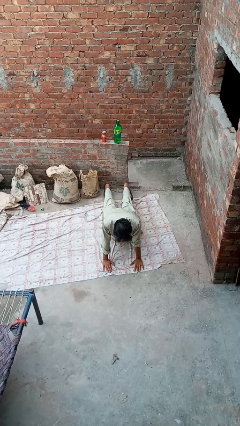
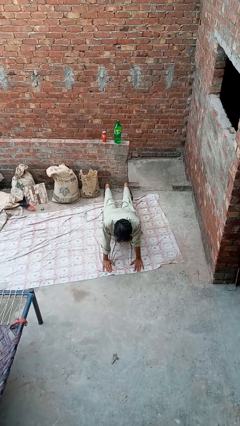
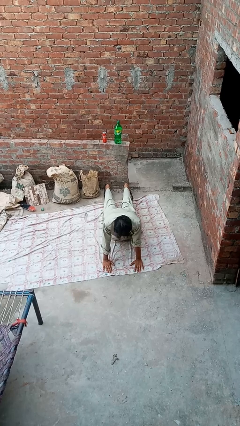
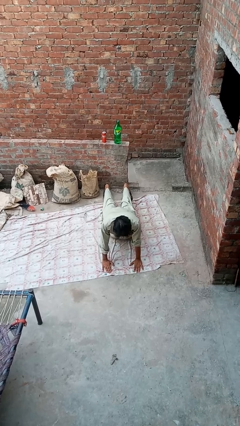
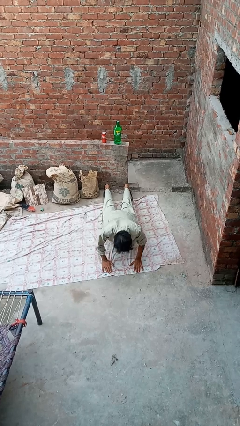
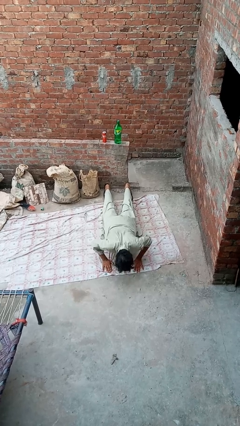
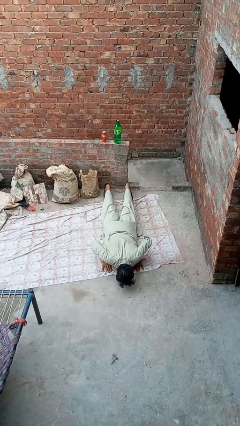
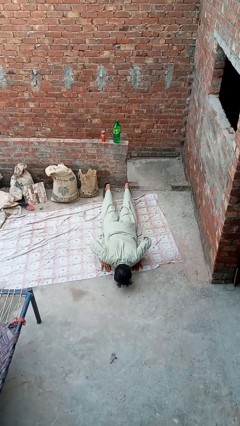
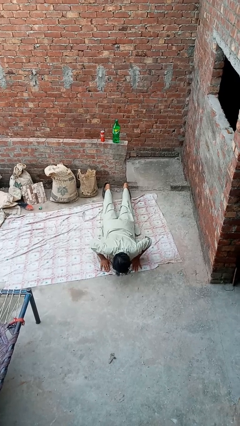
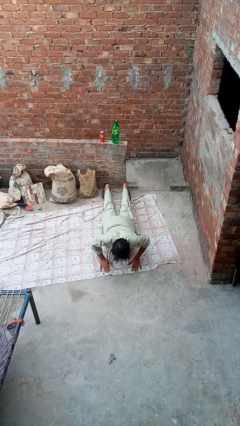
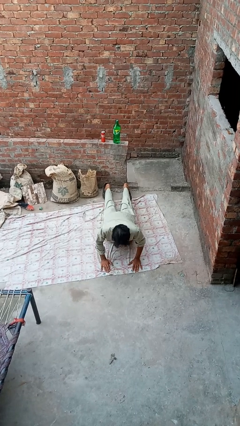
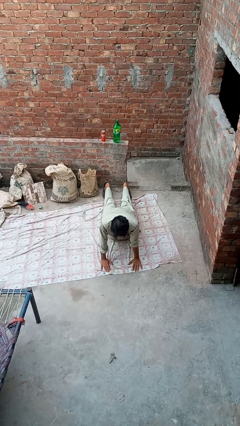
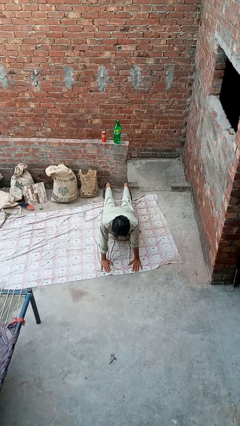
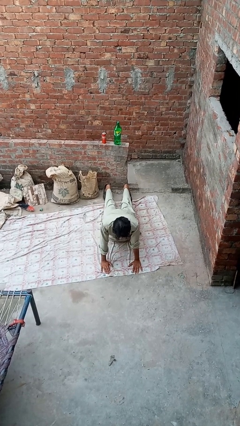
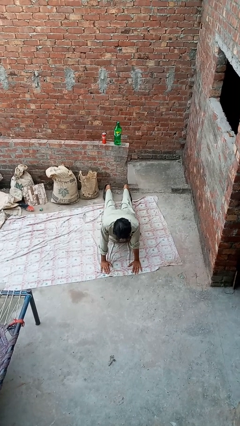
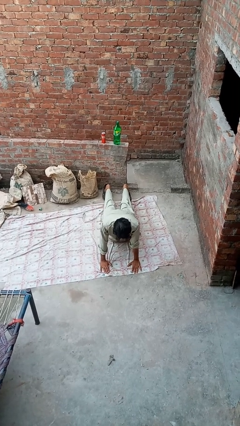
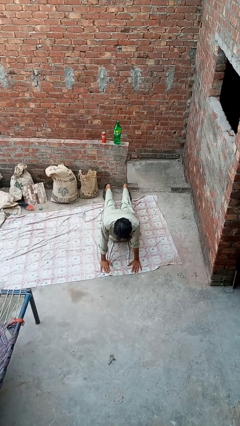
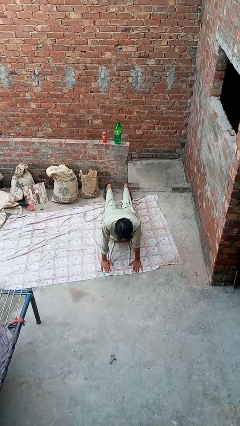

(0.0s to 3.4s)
person exercises with pushup

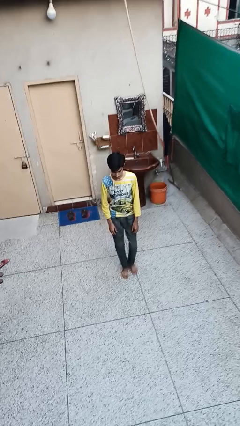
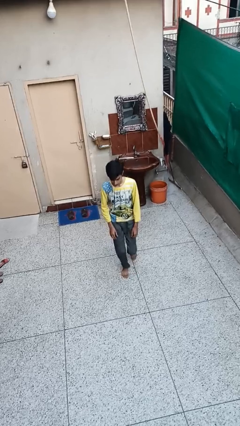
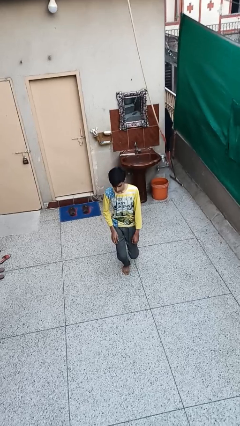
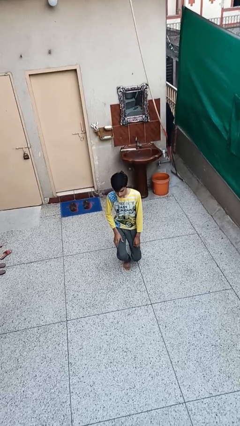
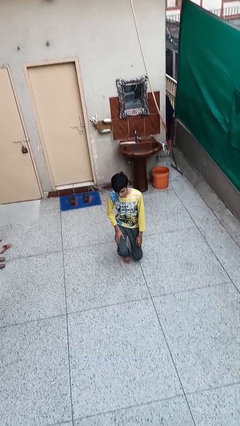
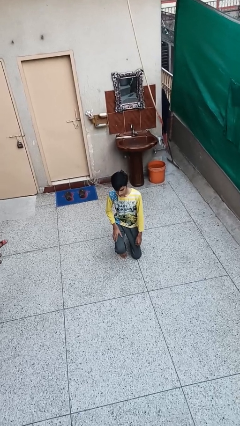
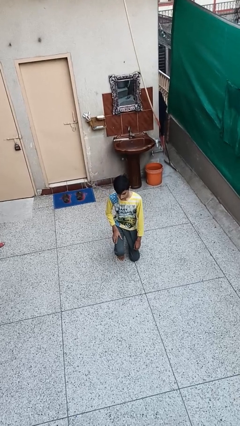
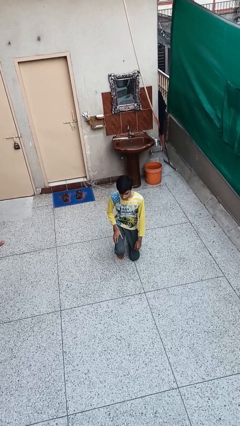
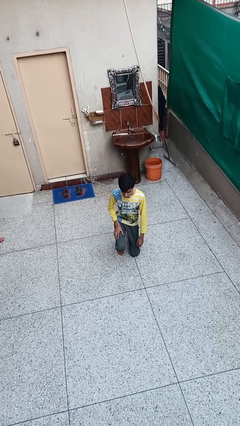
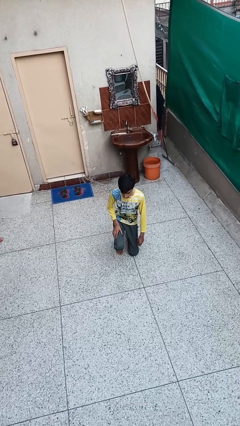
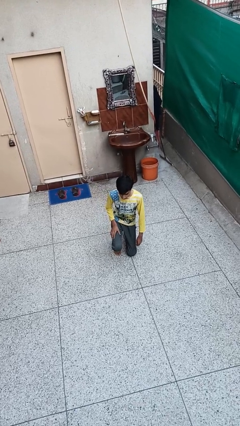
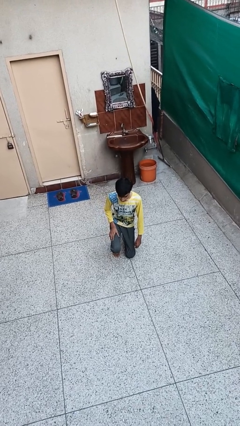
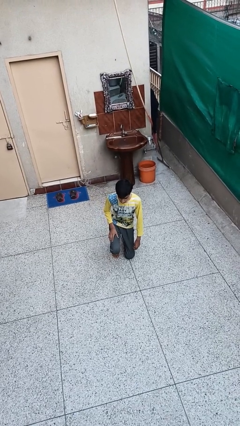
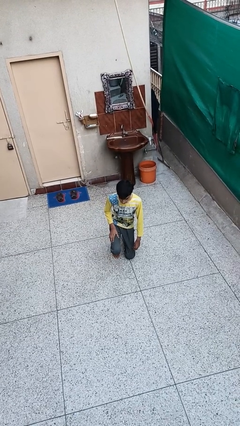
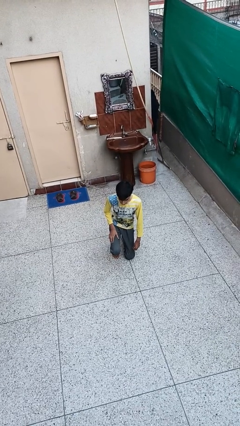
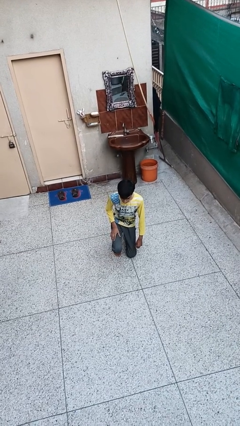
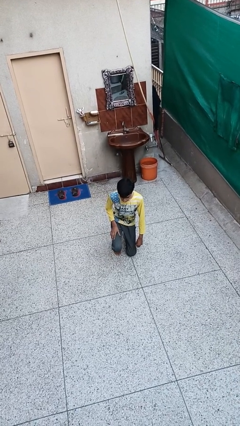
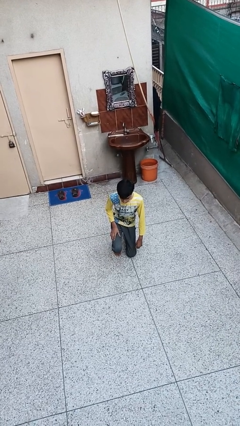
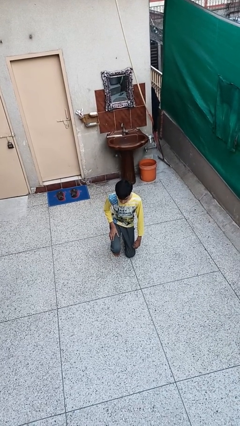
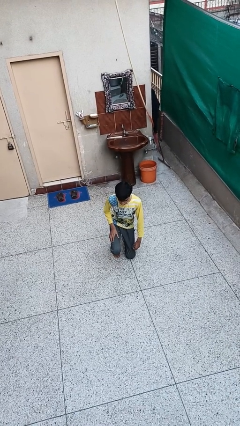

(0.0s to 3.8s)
person kneels

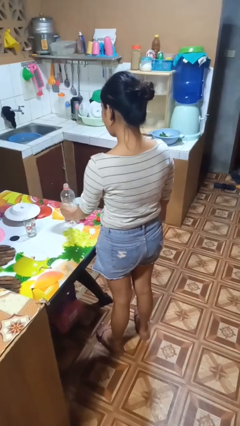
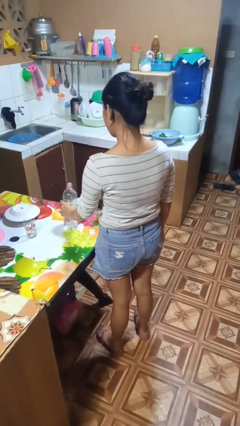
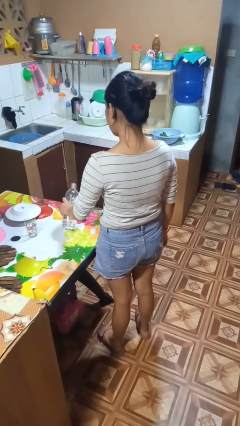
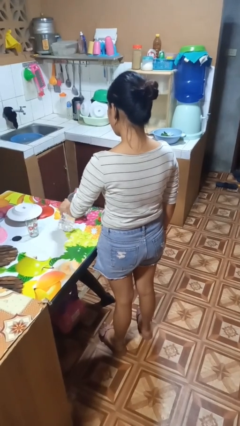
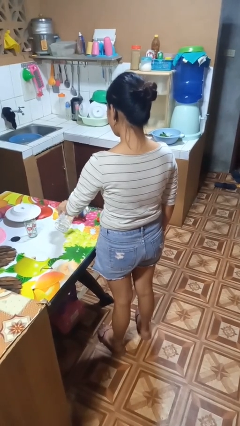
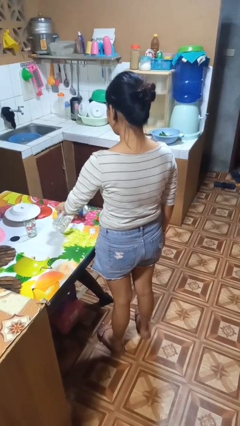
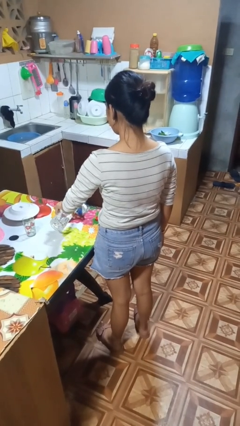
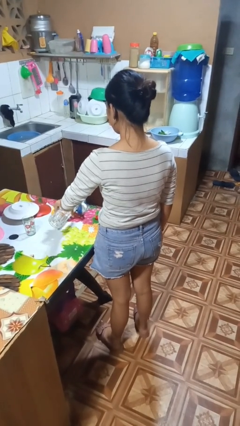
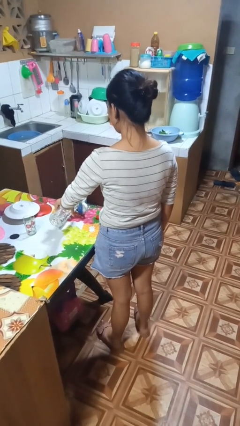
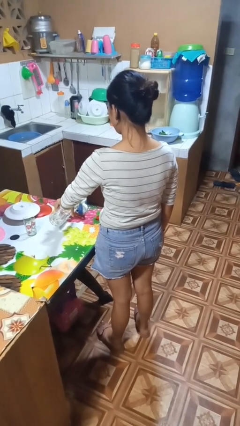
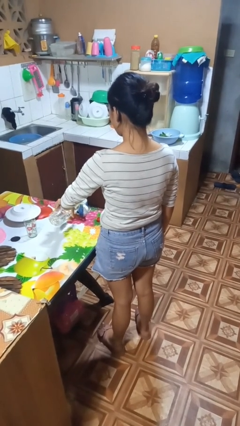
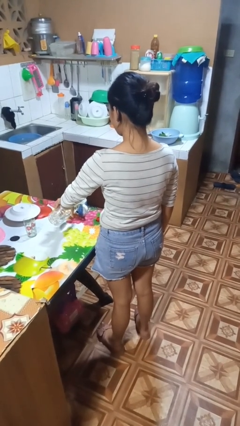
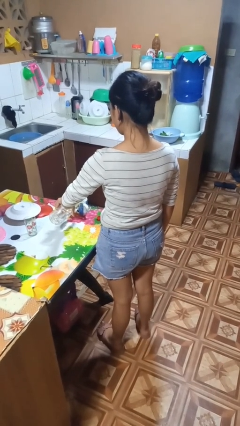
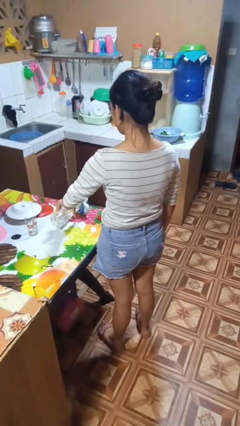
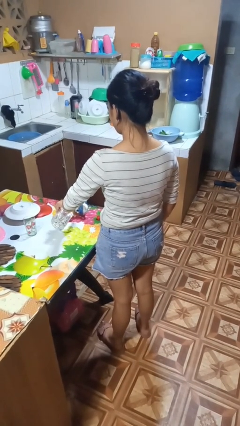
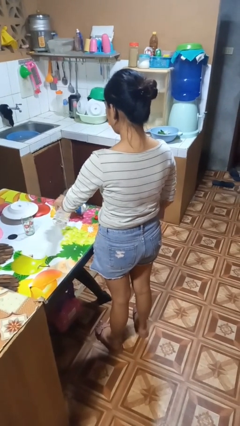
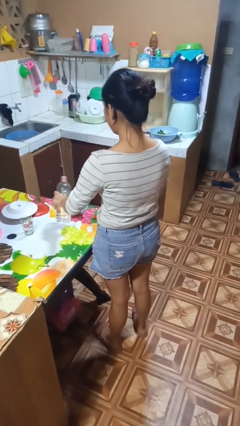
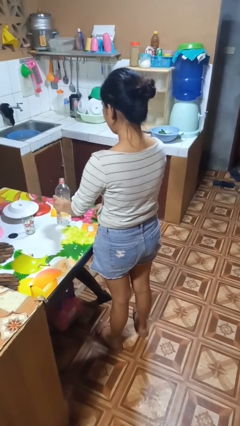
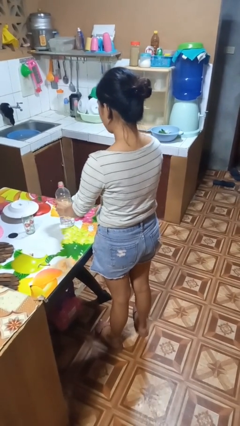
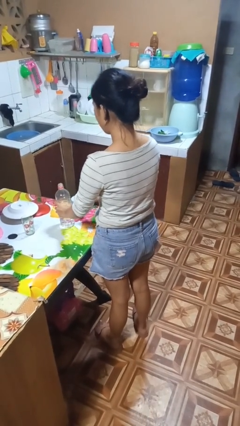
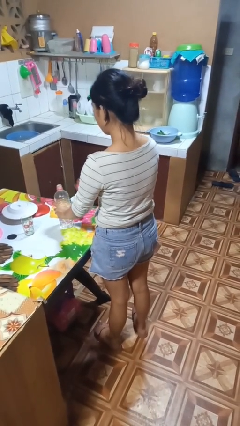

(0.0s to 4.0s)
person pours liquid into cup

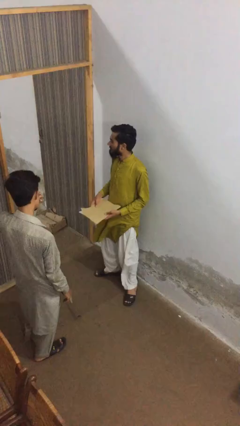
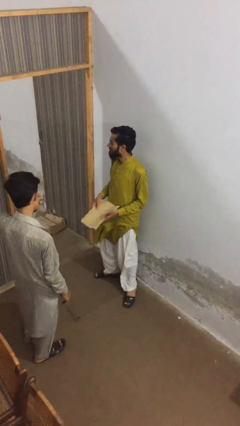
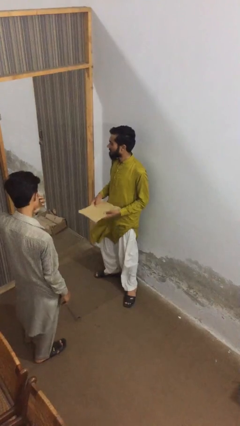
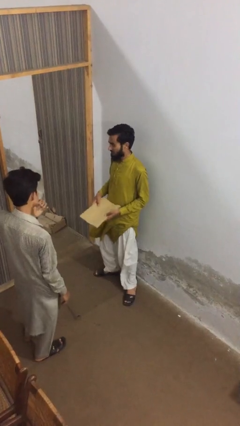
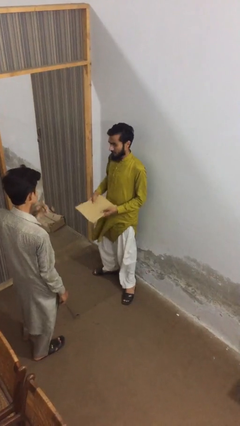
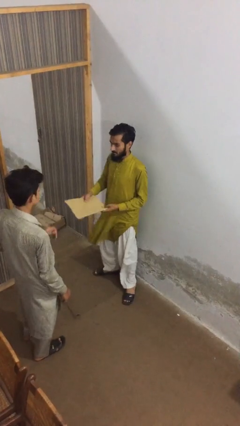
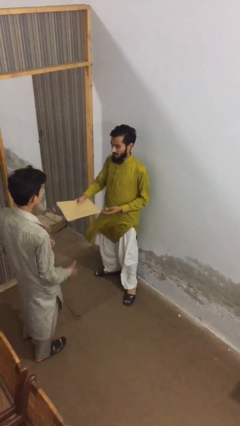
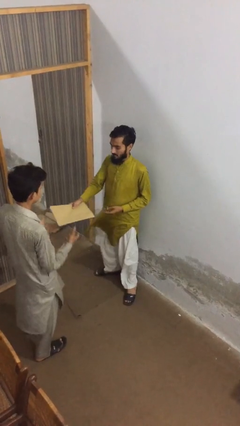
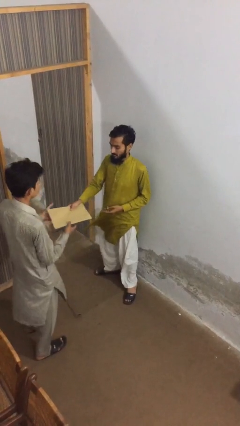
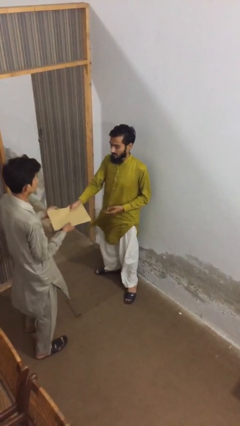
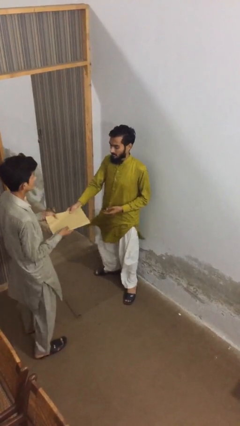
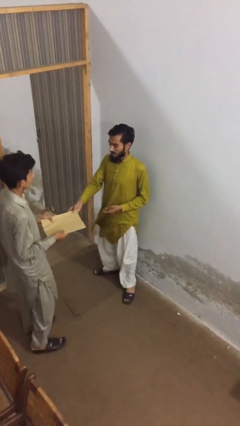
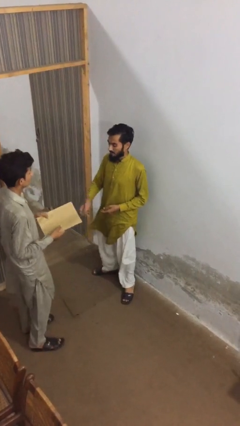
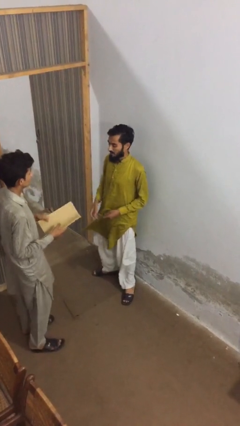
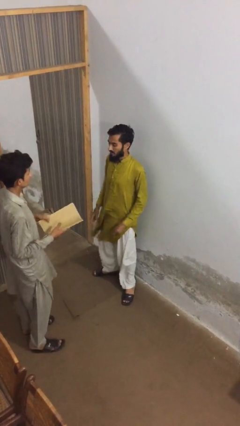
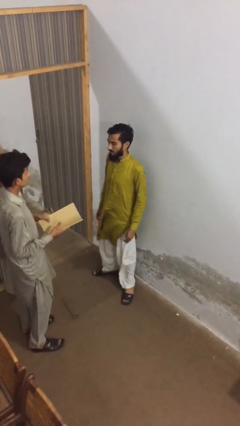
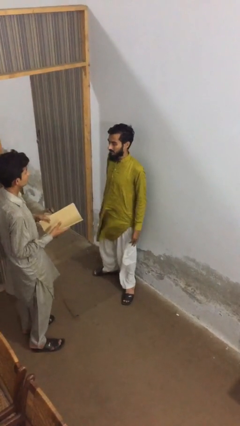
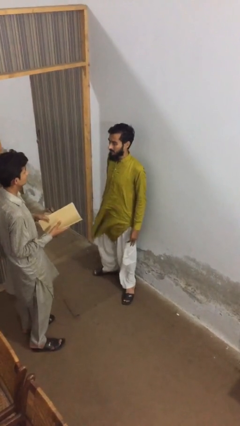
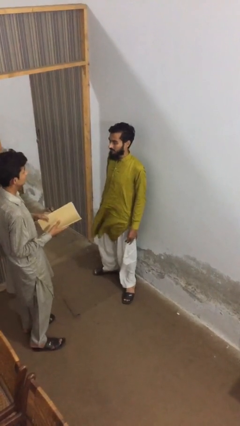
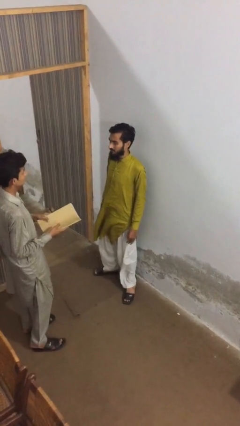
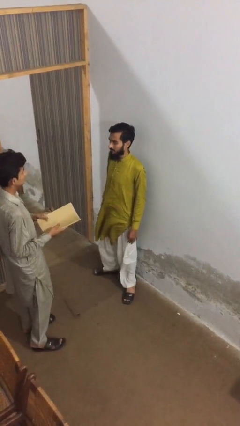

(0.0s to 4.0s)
person transfers object to person

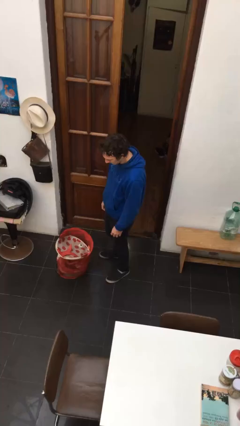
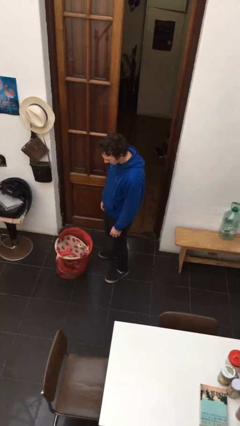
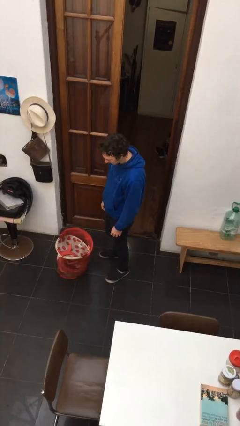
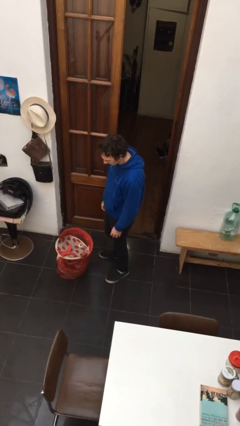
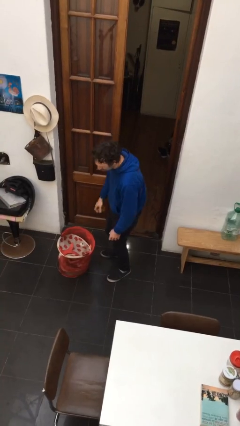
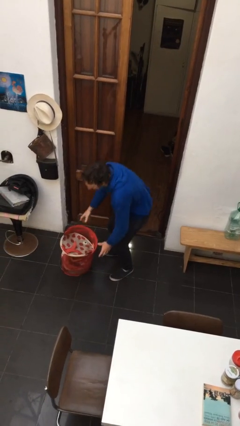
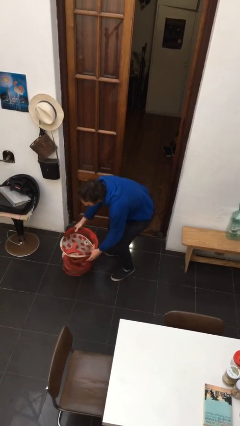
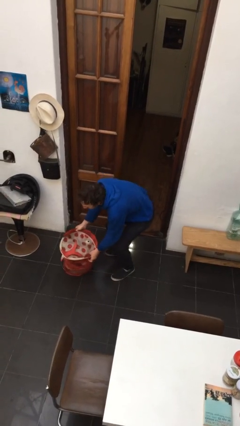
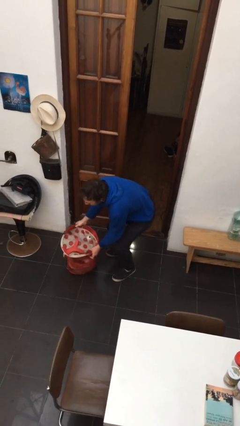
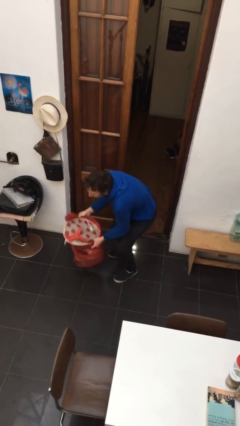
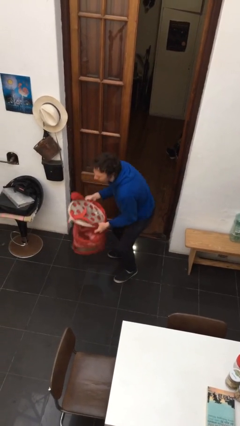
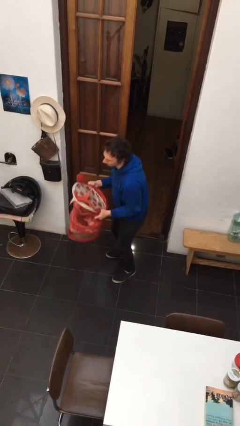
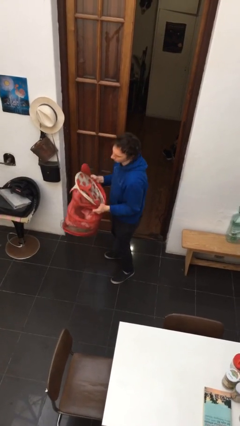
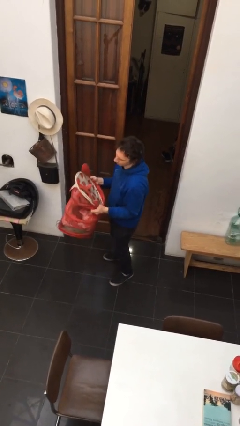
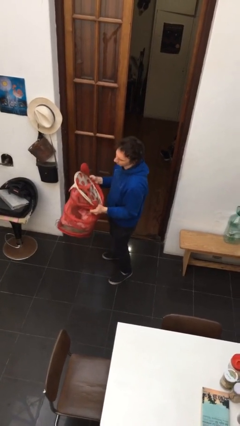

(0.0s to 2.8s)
person picks up object from floor
